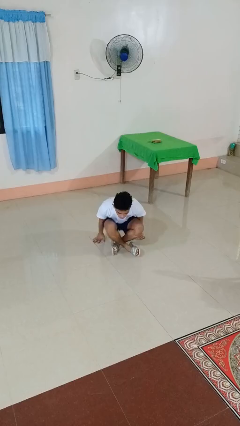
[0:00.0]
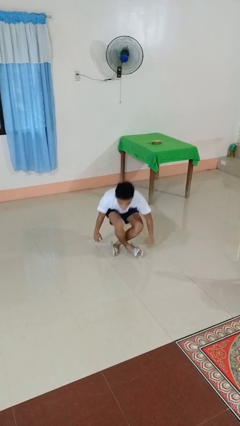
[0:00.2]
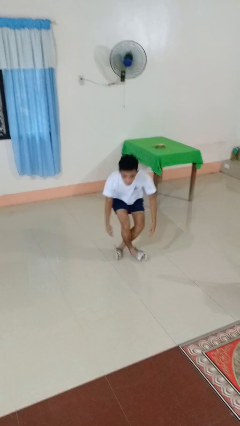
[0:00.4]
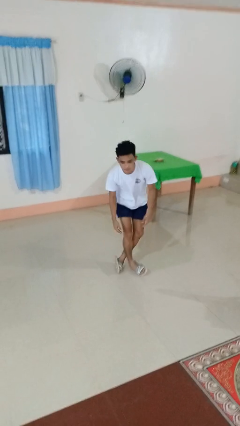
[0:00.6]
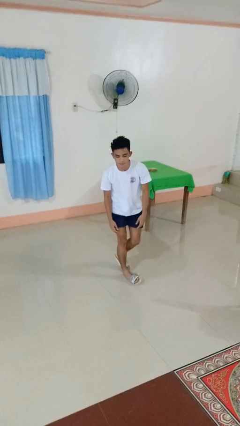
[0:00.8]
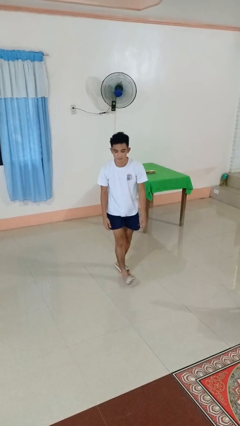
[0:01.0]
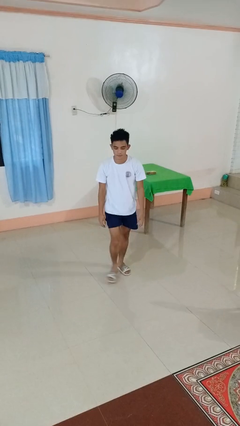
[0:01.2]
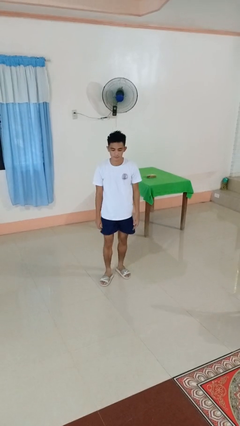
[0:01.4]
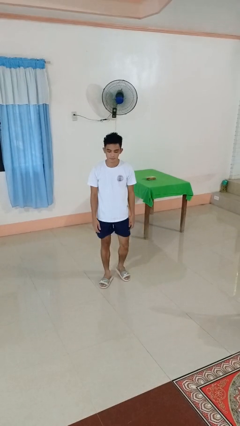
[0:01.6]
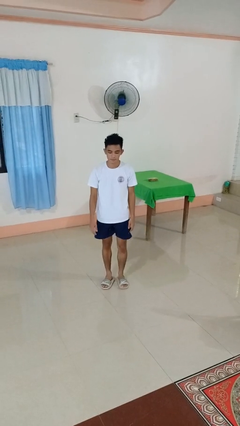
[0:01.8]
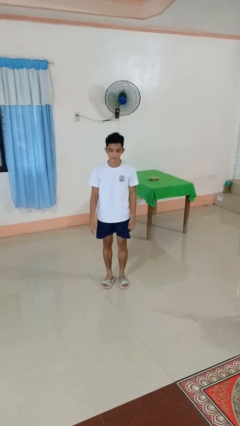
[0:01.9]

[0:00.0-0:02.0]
person stands up from floor

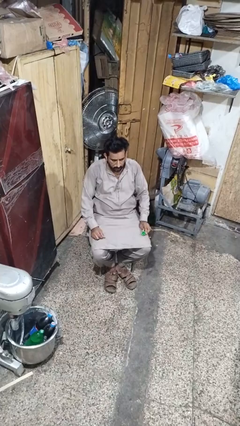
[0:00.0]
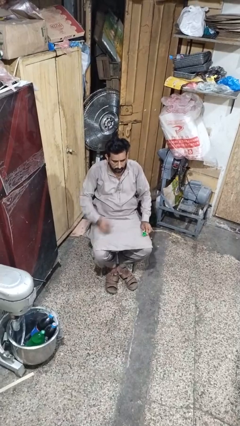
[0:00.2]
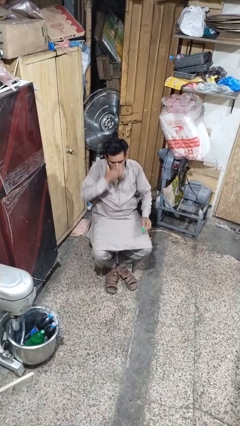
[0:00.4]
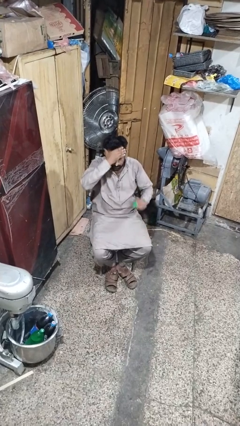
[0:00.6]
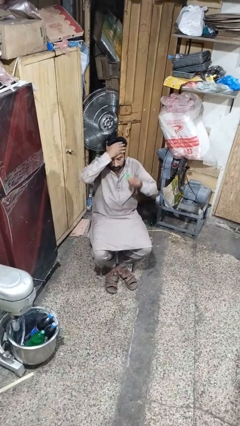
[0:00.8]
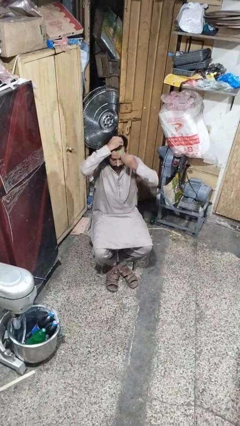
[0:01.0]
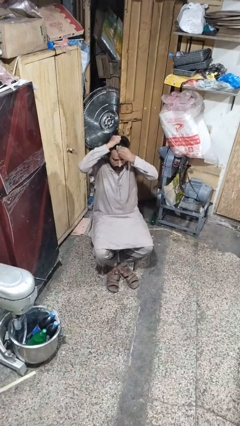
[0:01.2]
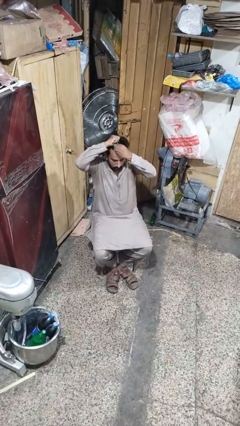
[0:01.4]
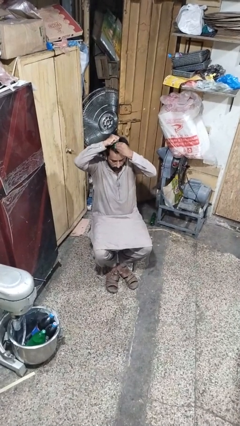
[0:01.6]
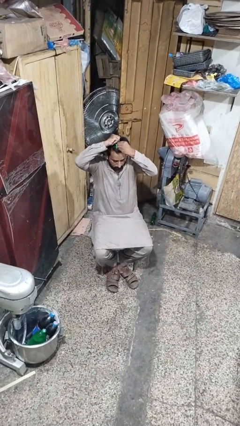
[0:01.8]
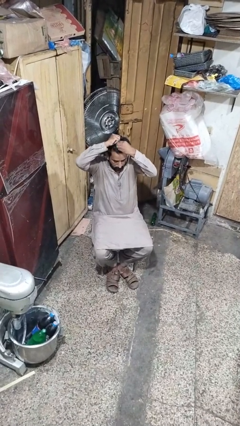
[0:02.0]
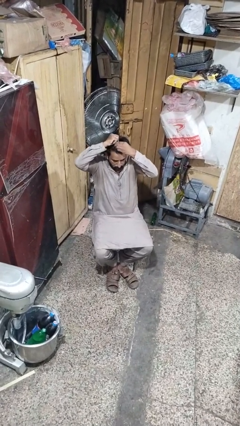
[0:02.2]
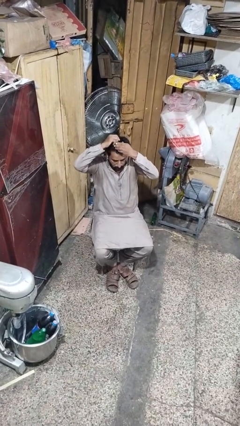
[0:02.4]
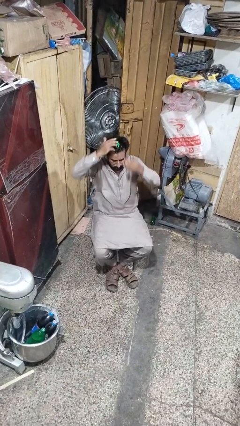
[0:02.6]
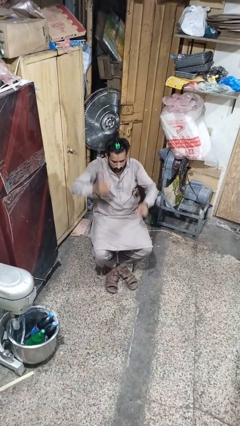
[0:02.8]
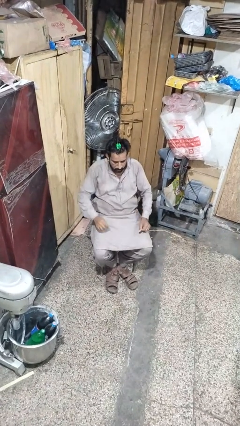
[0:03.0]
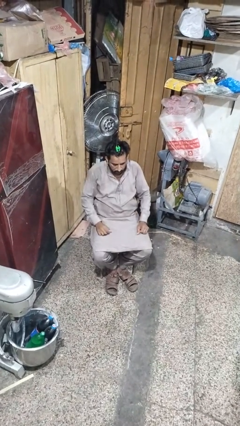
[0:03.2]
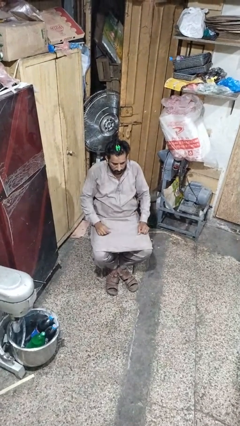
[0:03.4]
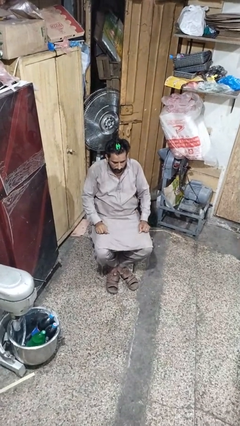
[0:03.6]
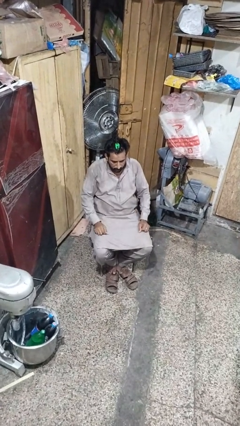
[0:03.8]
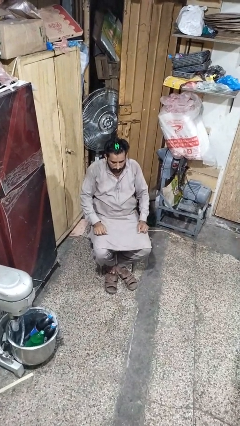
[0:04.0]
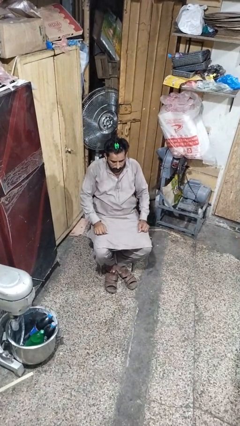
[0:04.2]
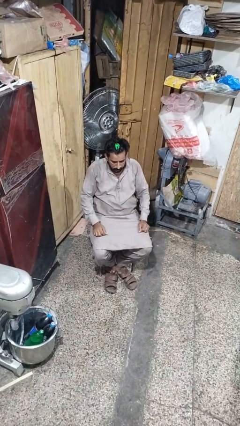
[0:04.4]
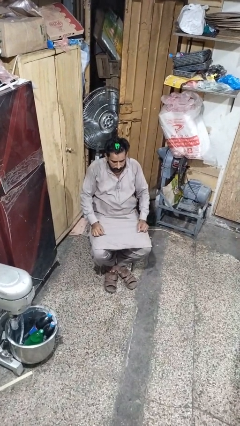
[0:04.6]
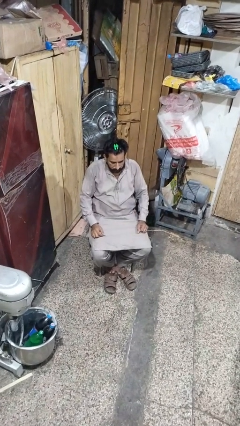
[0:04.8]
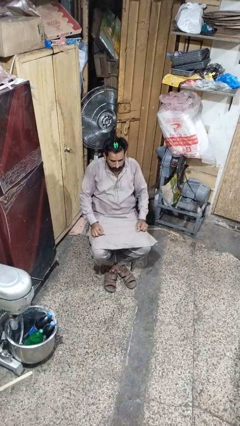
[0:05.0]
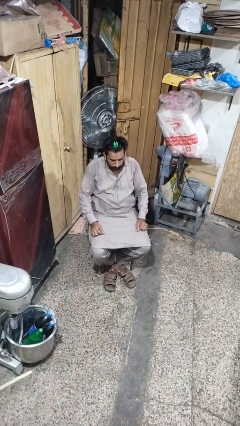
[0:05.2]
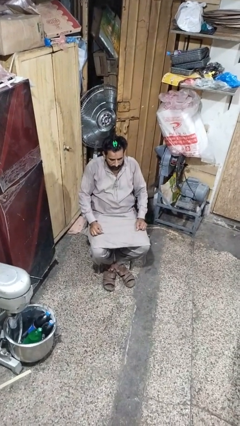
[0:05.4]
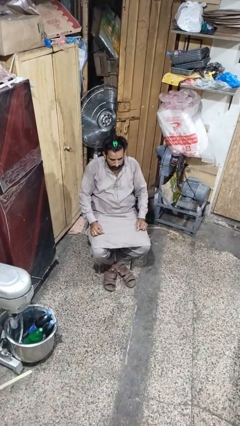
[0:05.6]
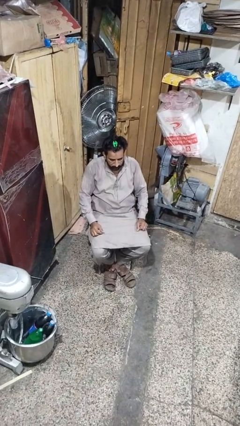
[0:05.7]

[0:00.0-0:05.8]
person puts hair in ponytail

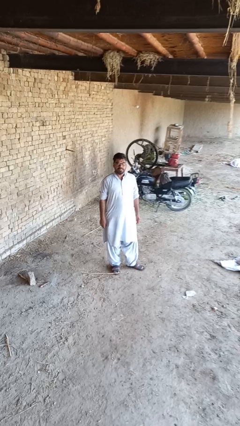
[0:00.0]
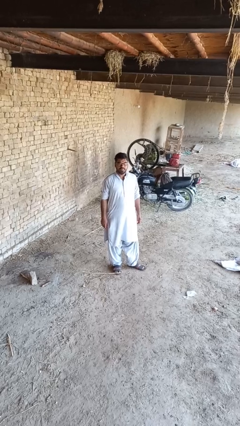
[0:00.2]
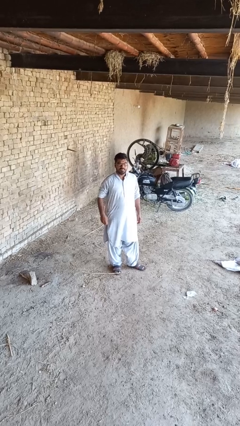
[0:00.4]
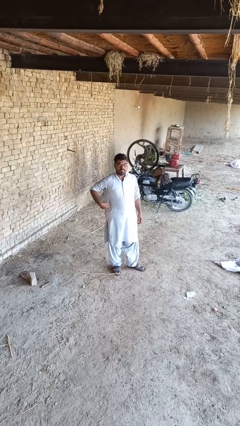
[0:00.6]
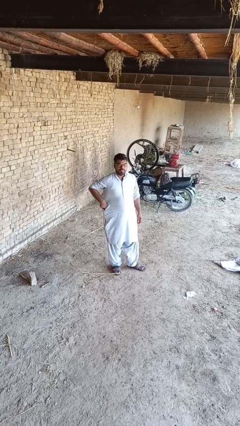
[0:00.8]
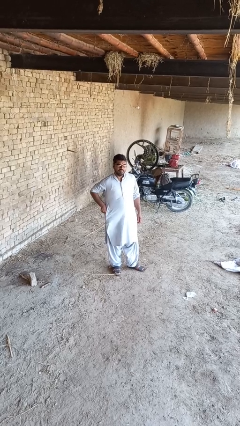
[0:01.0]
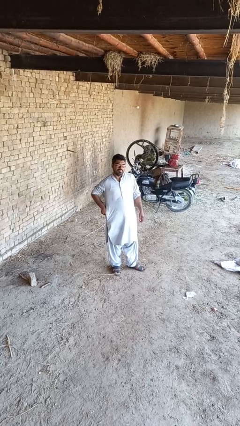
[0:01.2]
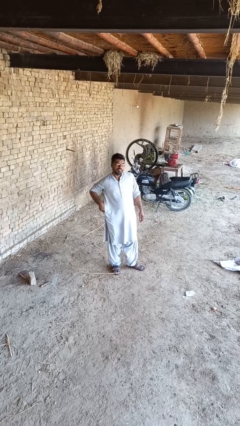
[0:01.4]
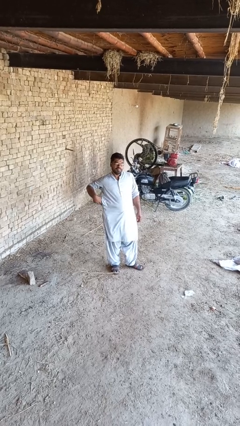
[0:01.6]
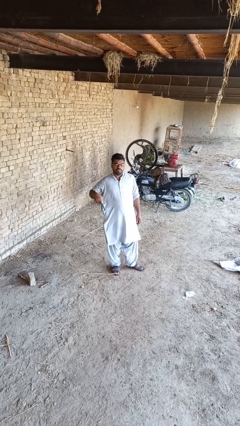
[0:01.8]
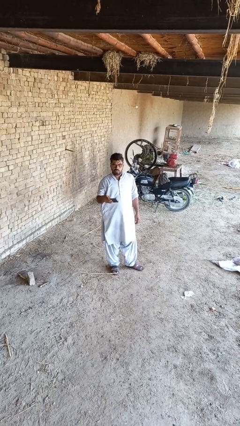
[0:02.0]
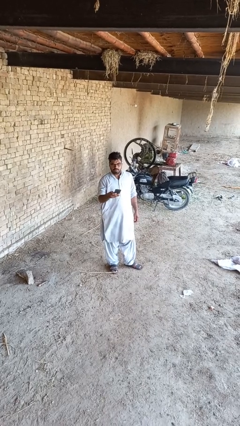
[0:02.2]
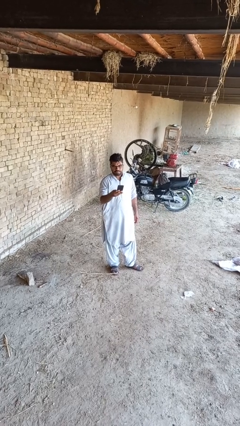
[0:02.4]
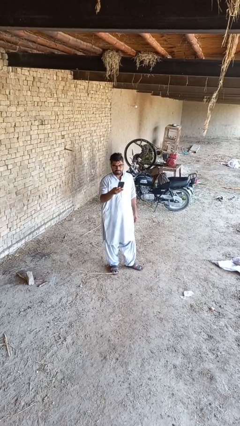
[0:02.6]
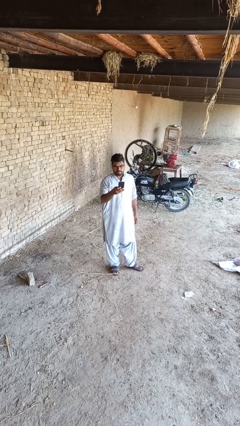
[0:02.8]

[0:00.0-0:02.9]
person takes phone from pocket

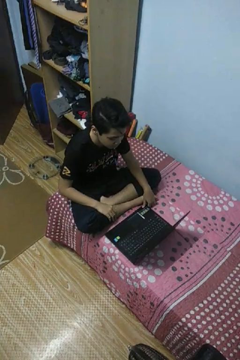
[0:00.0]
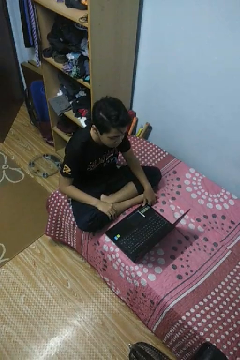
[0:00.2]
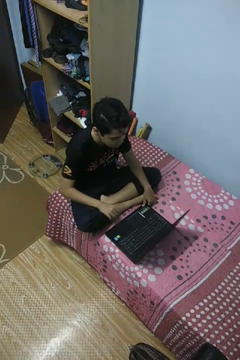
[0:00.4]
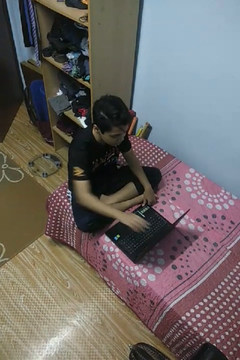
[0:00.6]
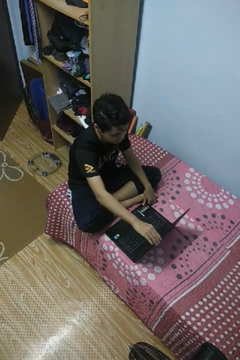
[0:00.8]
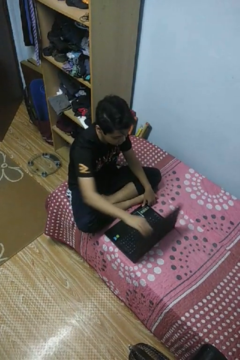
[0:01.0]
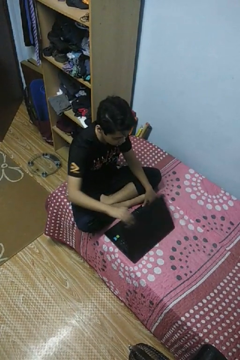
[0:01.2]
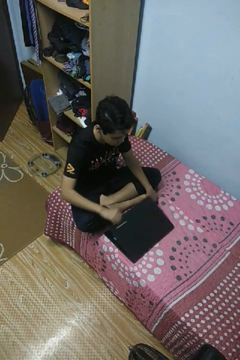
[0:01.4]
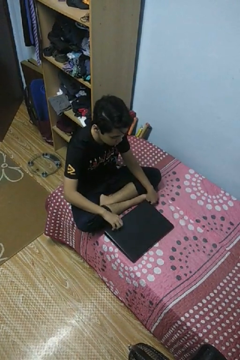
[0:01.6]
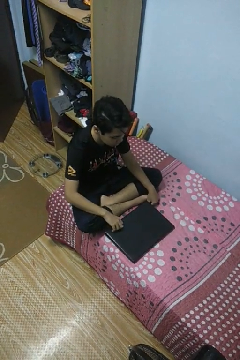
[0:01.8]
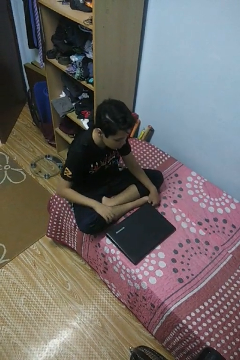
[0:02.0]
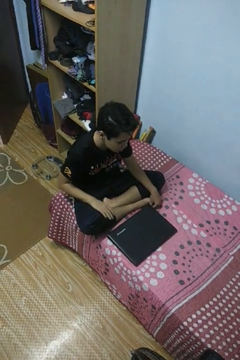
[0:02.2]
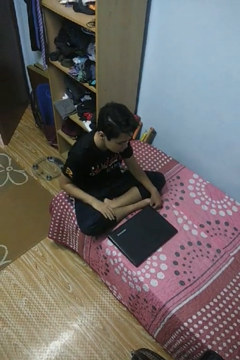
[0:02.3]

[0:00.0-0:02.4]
person closes laptop

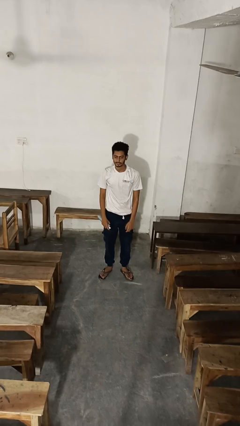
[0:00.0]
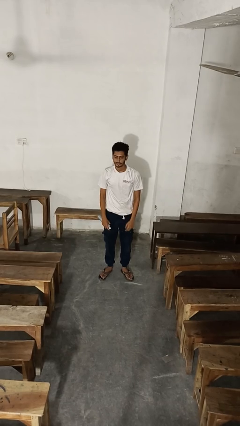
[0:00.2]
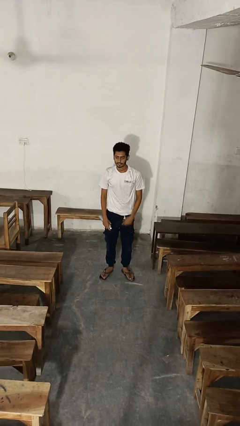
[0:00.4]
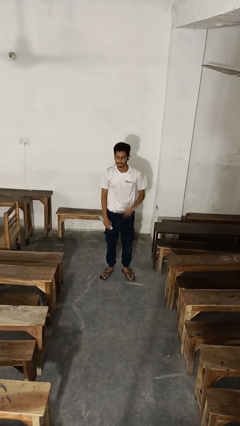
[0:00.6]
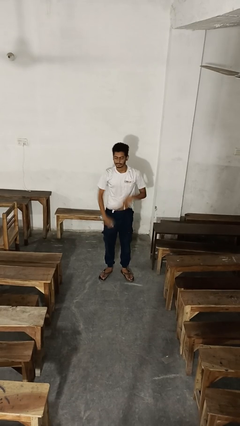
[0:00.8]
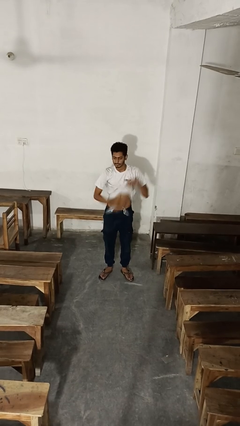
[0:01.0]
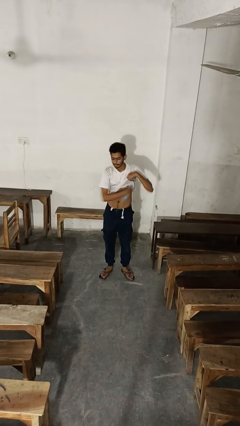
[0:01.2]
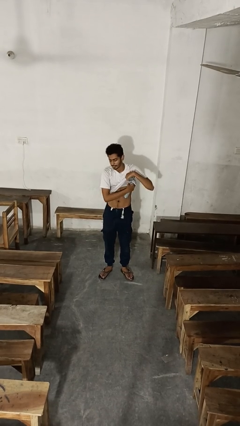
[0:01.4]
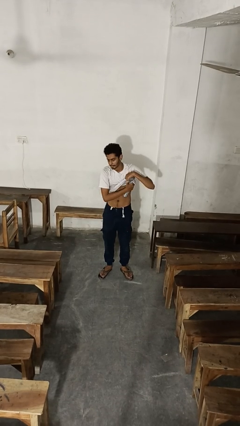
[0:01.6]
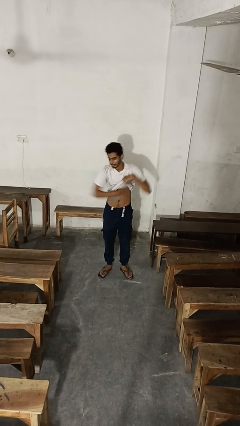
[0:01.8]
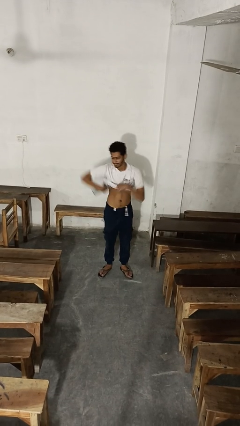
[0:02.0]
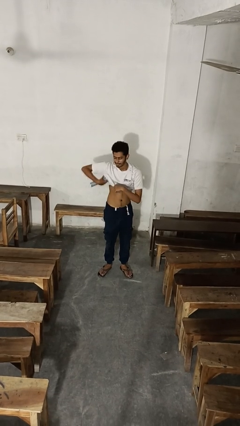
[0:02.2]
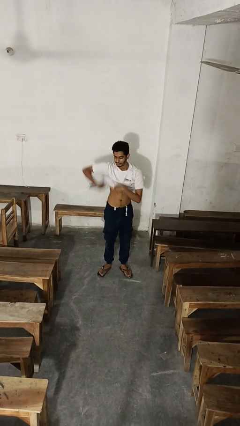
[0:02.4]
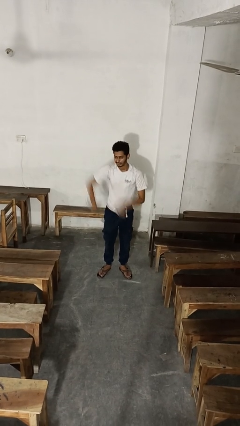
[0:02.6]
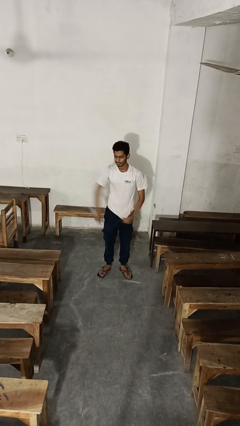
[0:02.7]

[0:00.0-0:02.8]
person applies deodorant

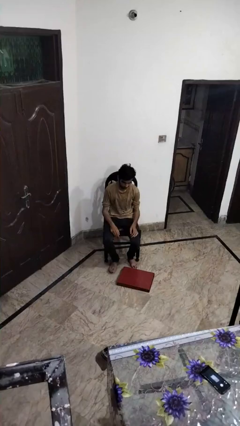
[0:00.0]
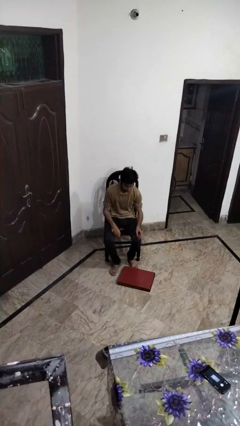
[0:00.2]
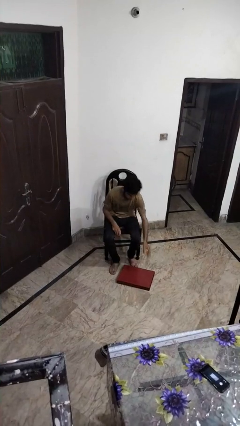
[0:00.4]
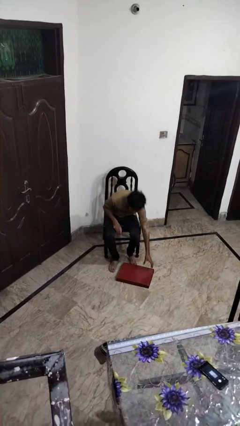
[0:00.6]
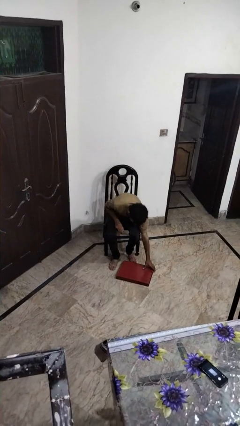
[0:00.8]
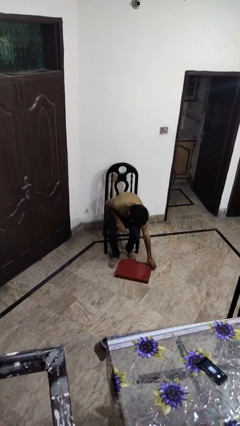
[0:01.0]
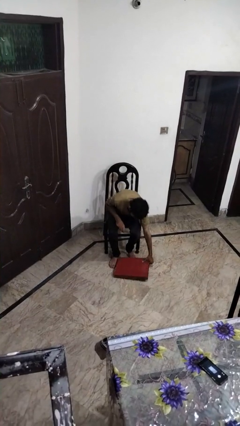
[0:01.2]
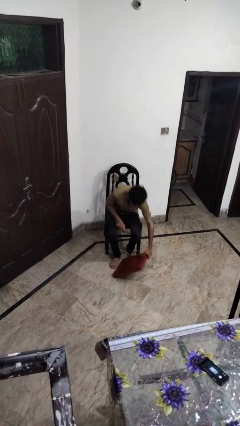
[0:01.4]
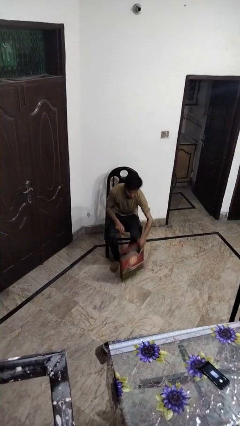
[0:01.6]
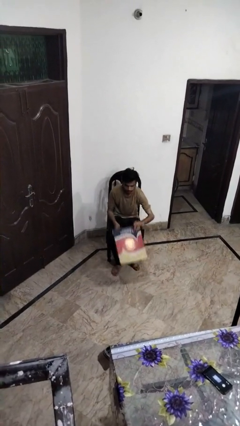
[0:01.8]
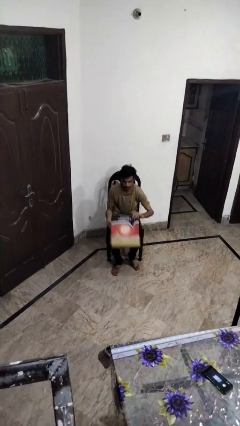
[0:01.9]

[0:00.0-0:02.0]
person picks up object from floor

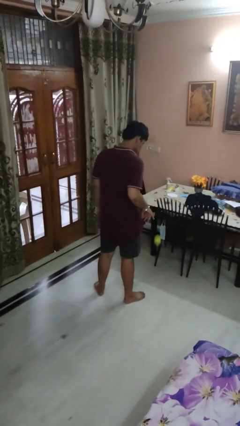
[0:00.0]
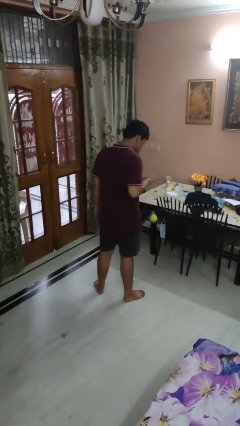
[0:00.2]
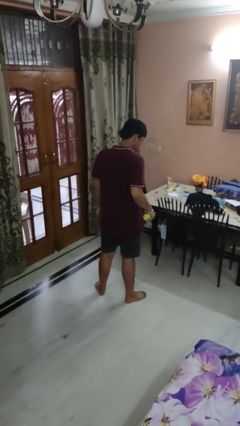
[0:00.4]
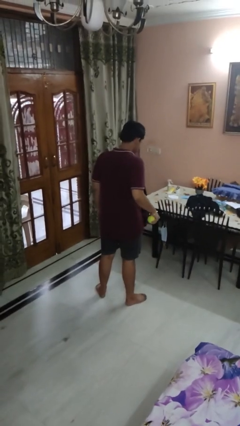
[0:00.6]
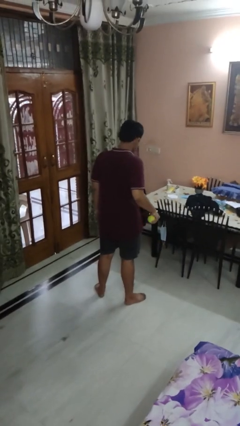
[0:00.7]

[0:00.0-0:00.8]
person bounces ball on floor
